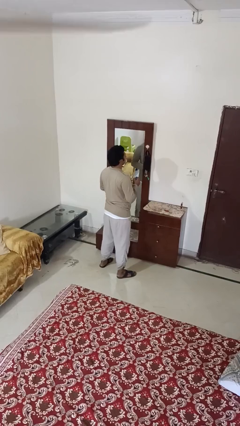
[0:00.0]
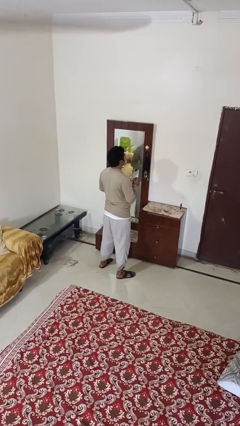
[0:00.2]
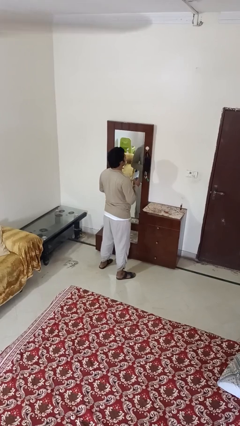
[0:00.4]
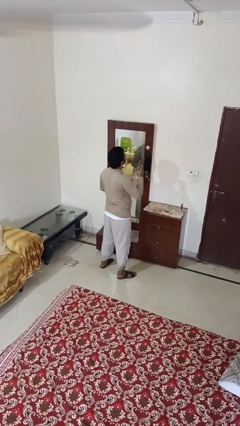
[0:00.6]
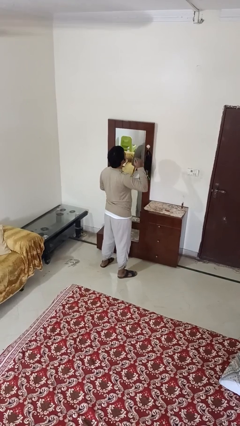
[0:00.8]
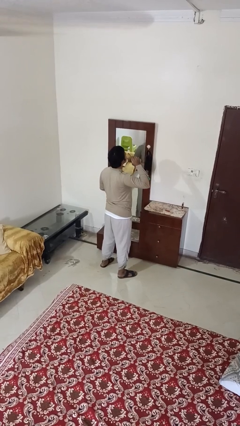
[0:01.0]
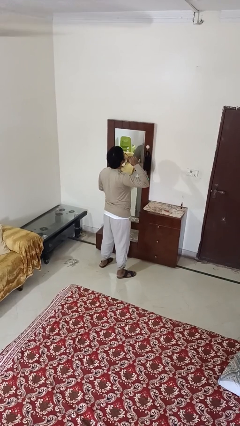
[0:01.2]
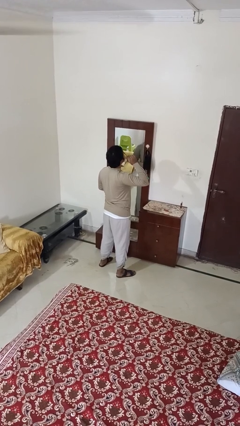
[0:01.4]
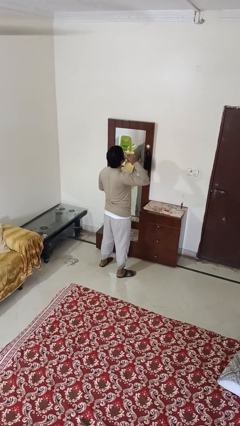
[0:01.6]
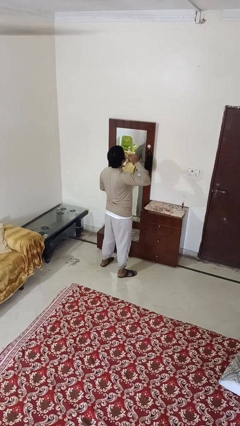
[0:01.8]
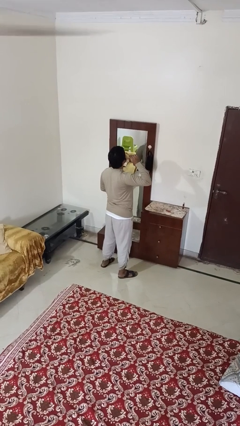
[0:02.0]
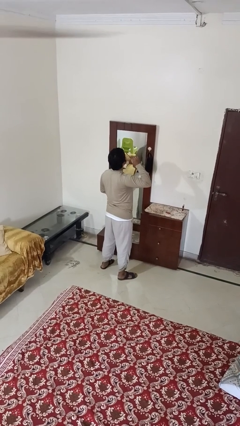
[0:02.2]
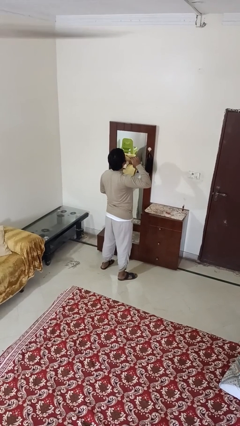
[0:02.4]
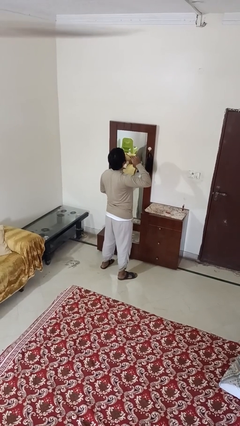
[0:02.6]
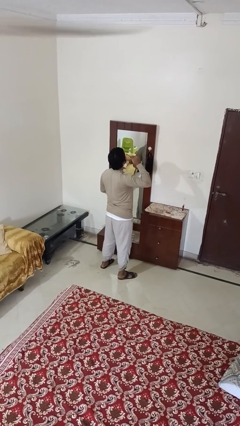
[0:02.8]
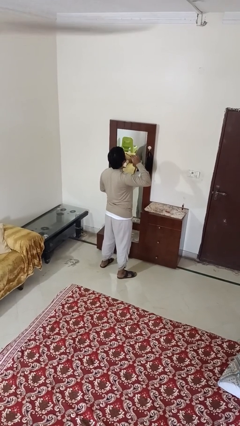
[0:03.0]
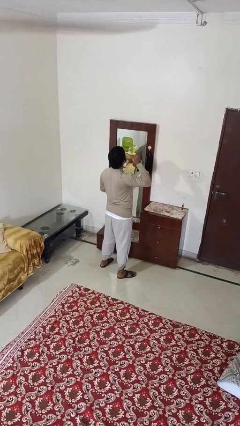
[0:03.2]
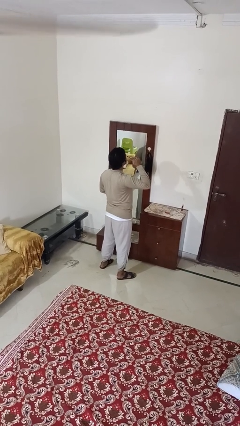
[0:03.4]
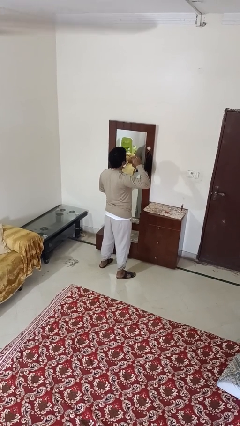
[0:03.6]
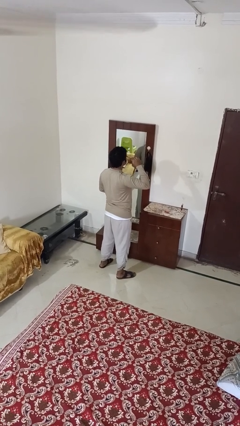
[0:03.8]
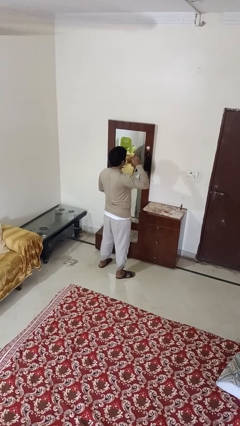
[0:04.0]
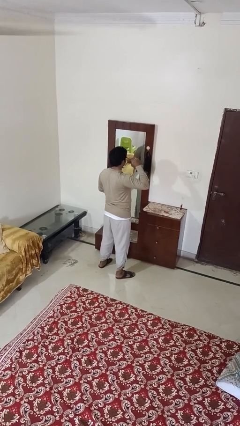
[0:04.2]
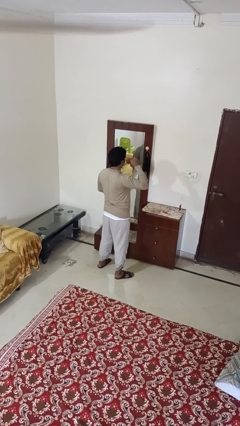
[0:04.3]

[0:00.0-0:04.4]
person applies eye makeup

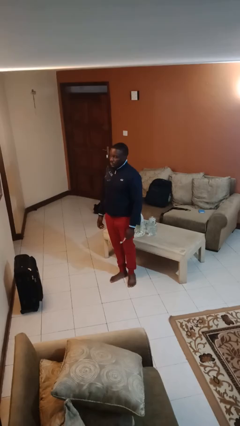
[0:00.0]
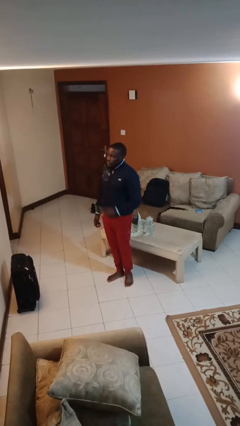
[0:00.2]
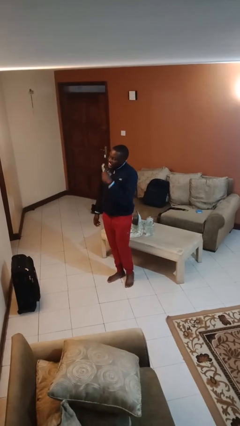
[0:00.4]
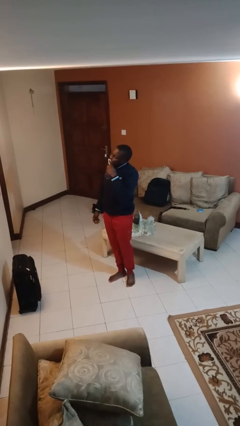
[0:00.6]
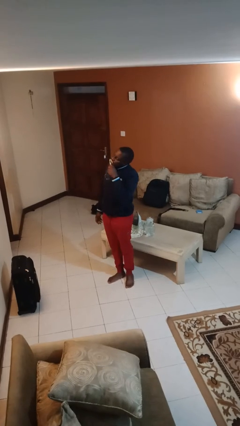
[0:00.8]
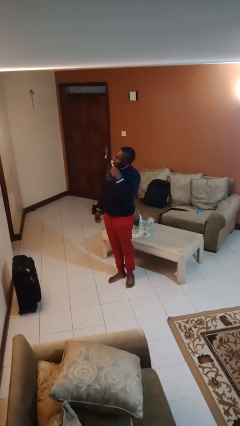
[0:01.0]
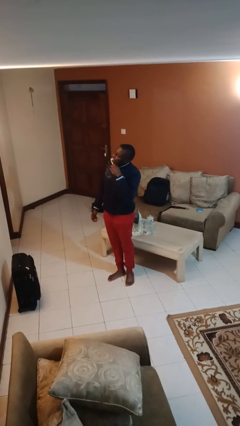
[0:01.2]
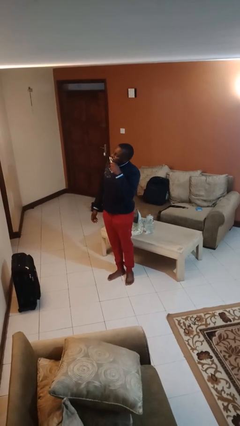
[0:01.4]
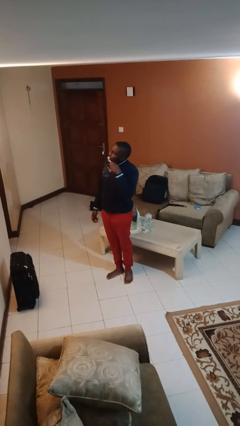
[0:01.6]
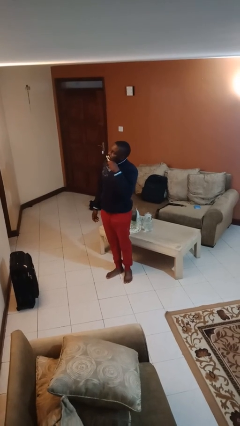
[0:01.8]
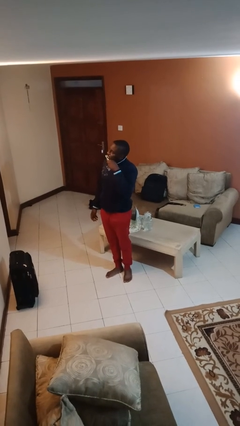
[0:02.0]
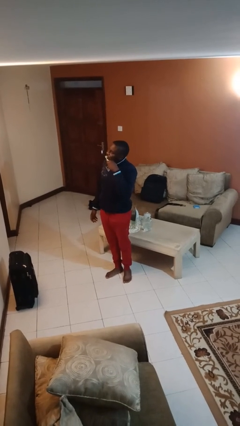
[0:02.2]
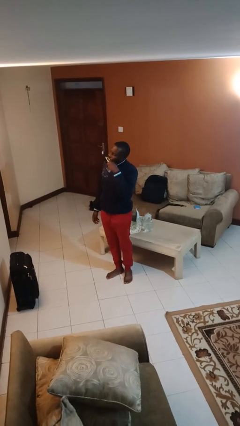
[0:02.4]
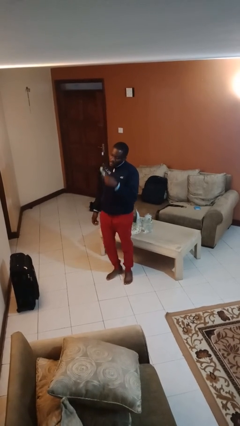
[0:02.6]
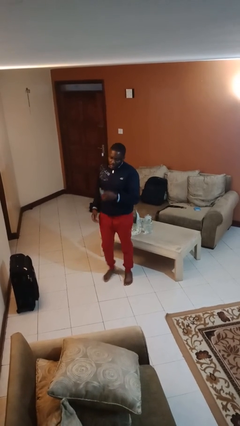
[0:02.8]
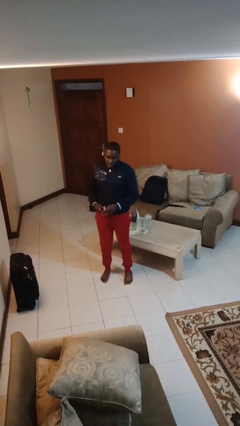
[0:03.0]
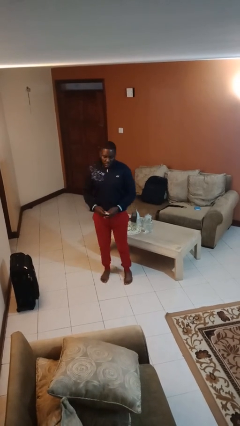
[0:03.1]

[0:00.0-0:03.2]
person brushes teeth

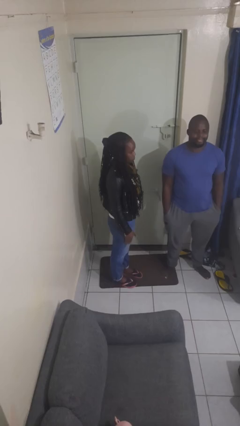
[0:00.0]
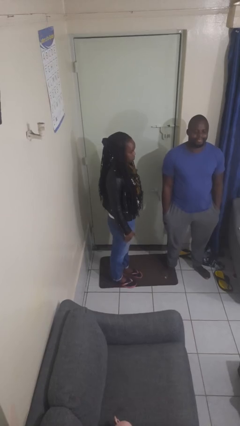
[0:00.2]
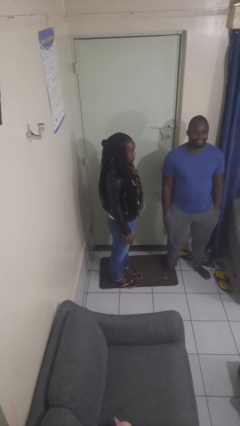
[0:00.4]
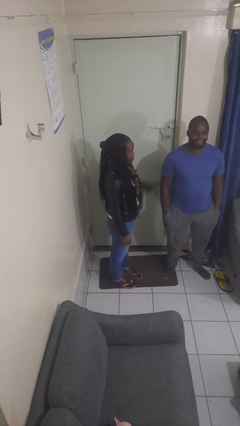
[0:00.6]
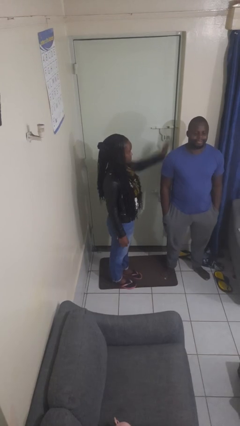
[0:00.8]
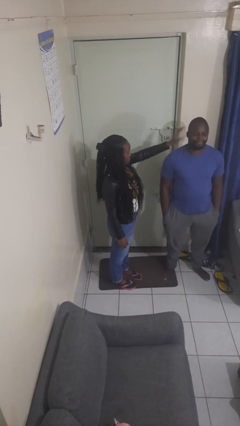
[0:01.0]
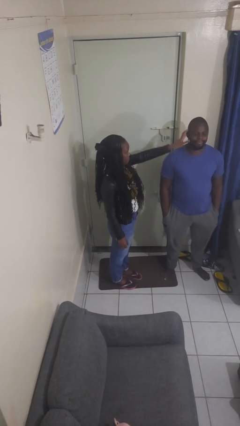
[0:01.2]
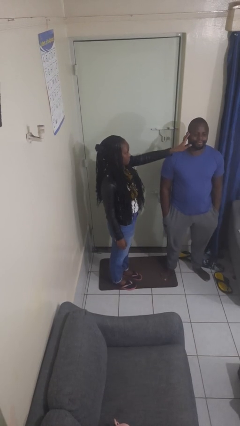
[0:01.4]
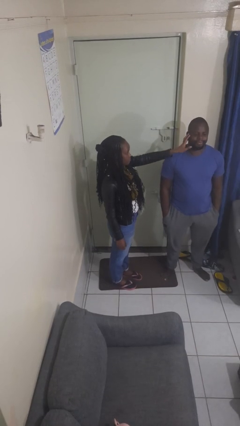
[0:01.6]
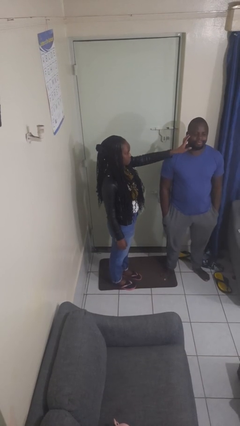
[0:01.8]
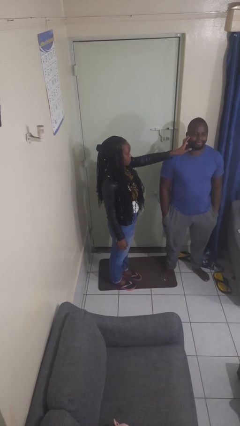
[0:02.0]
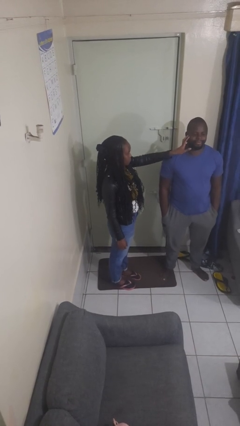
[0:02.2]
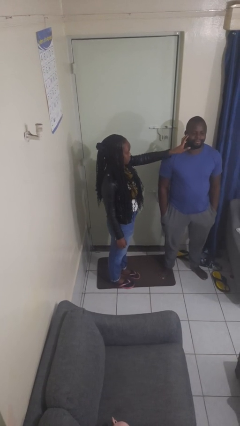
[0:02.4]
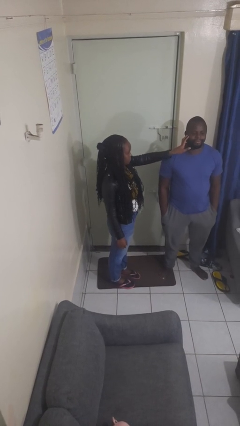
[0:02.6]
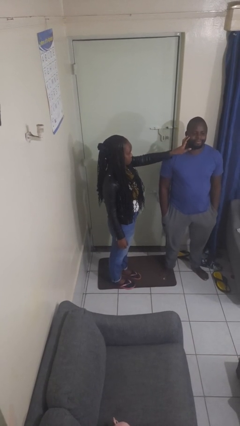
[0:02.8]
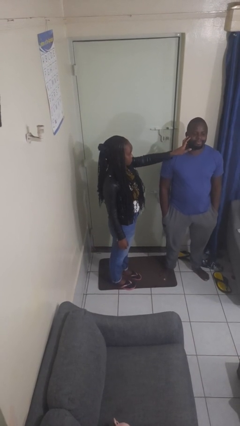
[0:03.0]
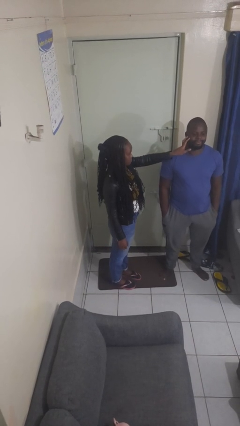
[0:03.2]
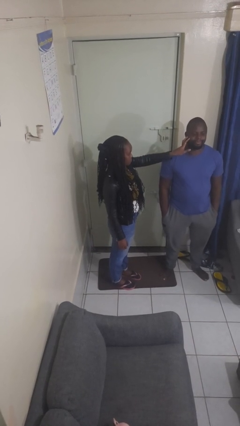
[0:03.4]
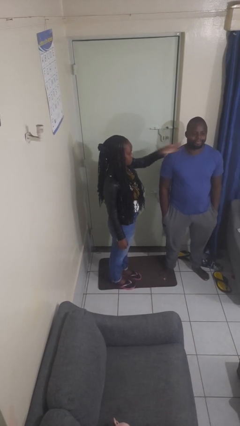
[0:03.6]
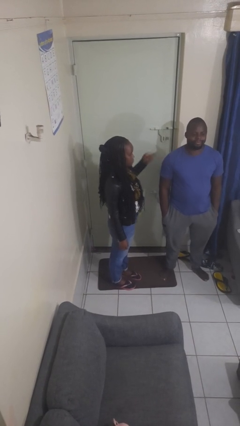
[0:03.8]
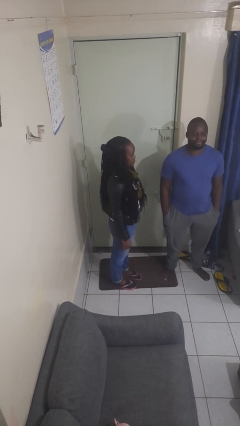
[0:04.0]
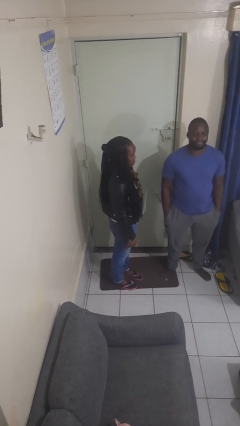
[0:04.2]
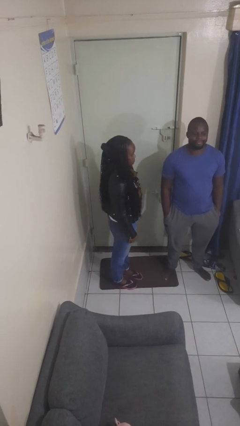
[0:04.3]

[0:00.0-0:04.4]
person touches face of person

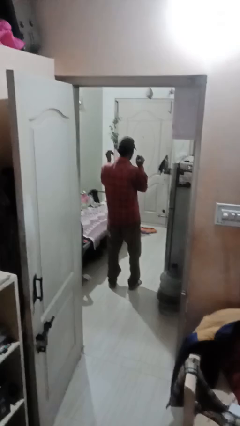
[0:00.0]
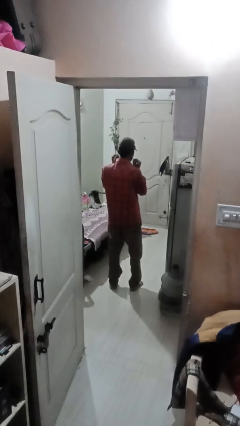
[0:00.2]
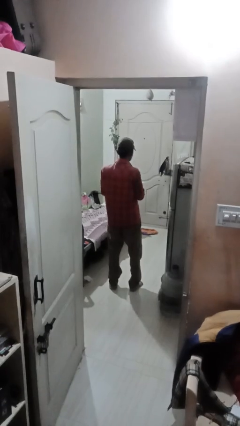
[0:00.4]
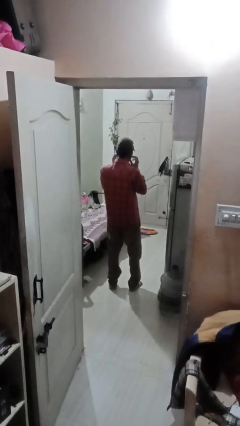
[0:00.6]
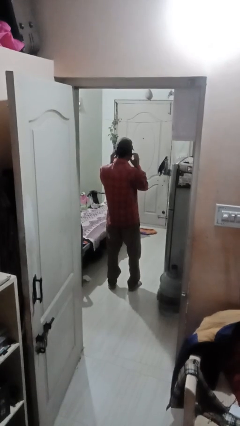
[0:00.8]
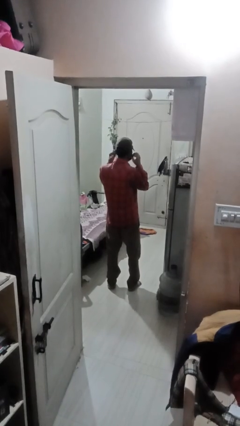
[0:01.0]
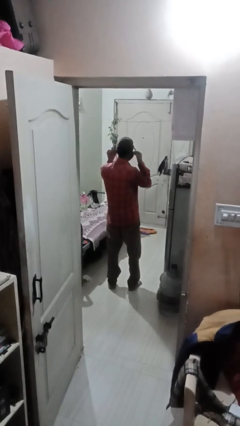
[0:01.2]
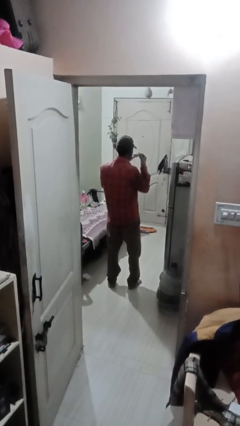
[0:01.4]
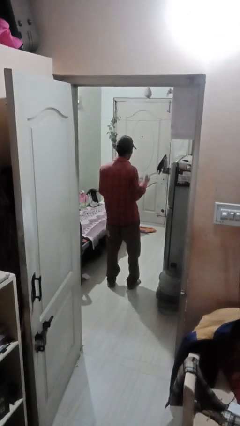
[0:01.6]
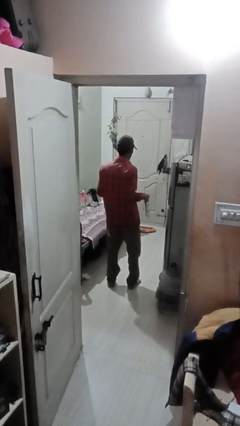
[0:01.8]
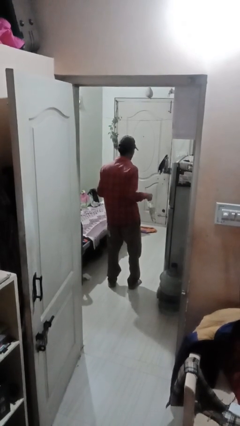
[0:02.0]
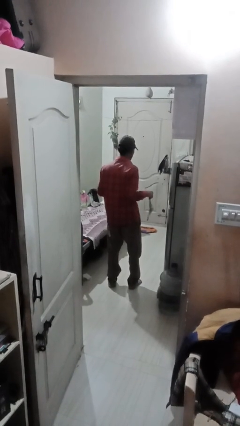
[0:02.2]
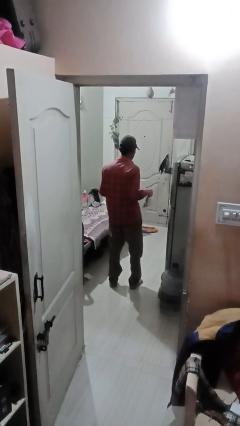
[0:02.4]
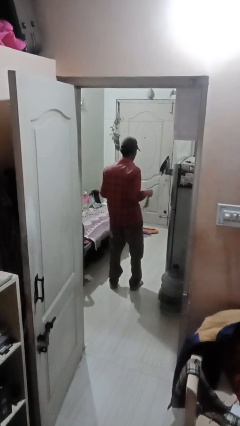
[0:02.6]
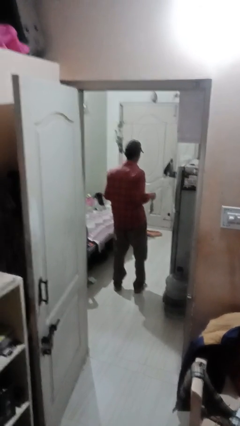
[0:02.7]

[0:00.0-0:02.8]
person takes off facemask

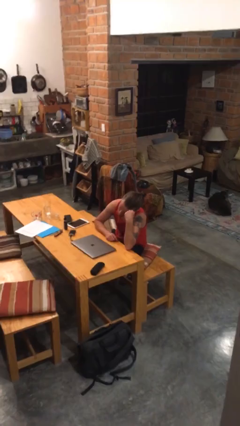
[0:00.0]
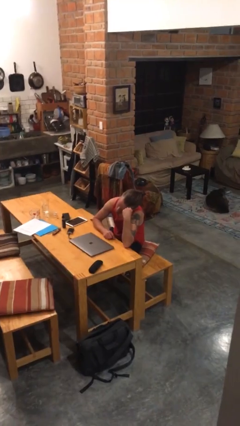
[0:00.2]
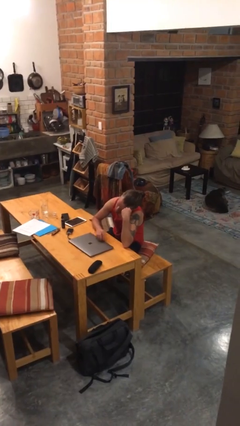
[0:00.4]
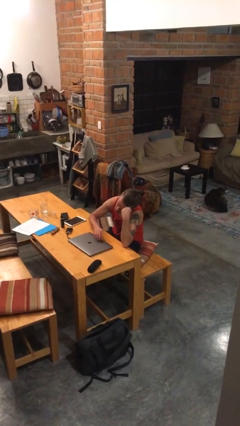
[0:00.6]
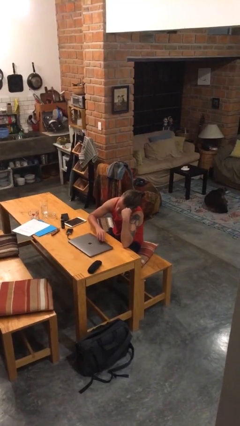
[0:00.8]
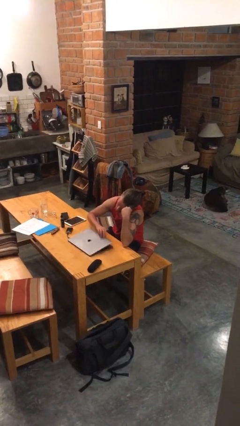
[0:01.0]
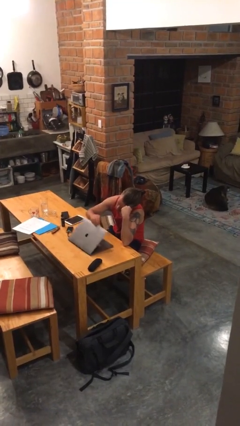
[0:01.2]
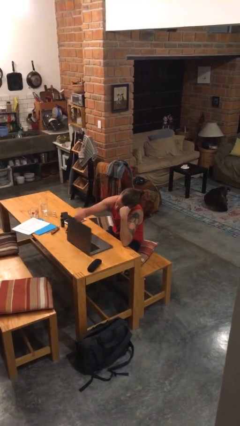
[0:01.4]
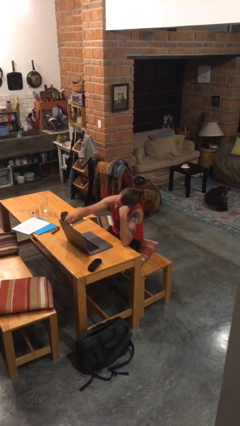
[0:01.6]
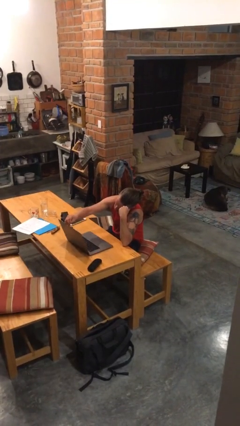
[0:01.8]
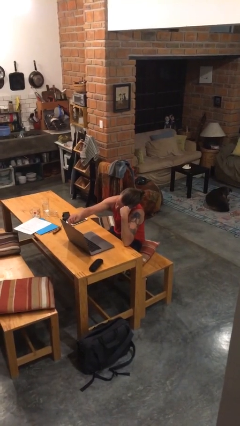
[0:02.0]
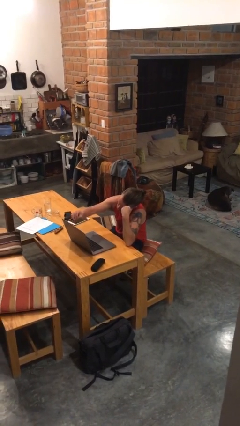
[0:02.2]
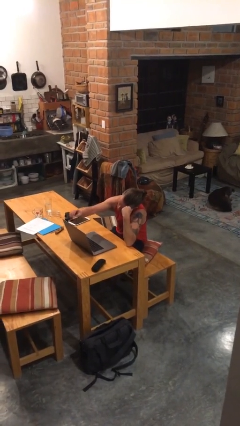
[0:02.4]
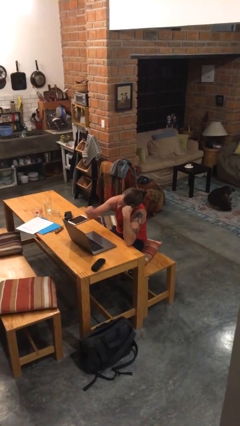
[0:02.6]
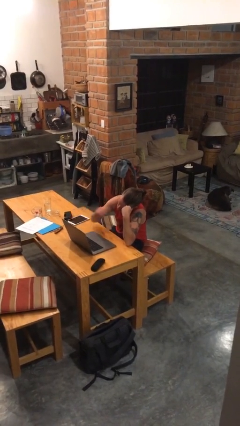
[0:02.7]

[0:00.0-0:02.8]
person opens laptop

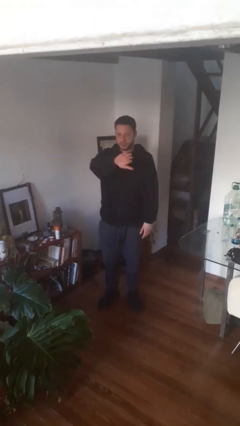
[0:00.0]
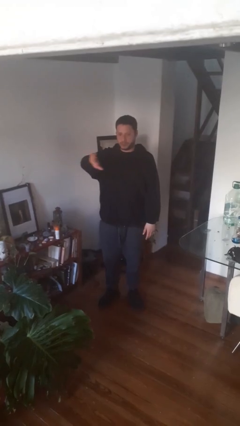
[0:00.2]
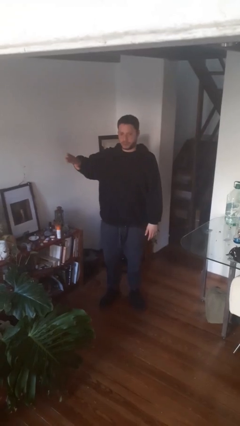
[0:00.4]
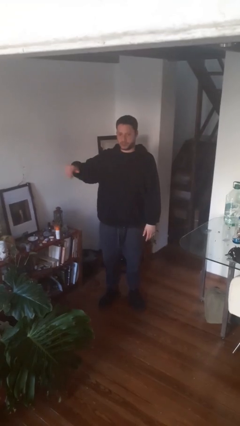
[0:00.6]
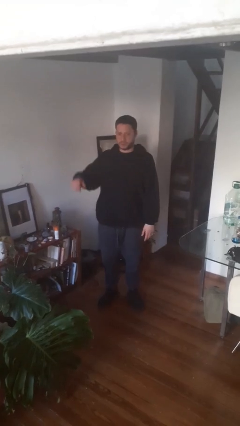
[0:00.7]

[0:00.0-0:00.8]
person gestures swipe right
